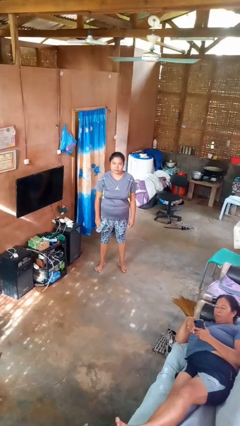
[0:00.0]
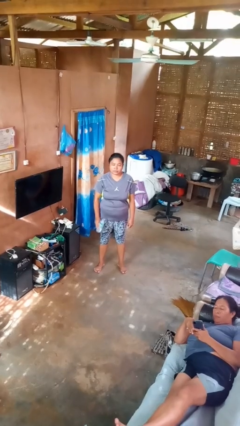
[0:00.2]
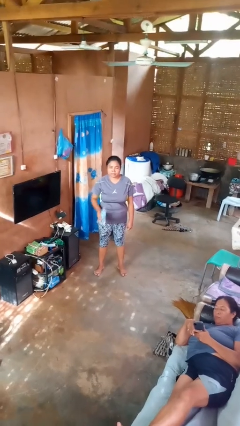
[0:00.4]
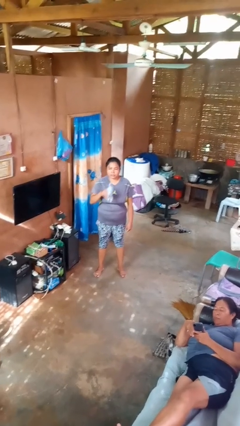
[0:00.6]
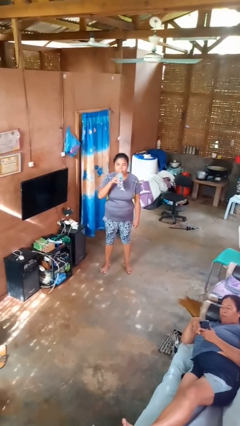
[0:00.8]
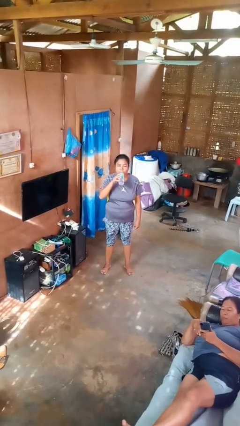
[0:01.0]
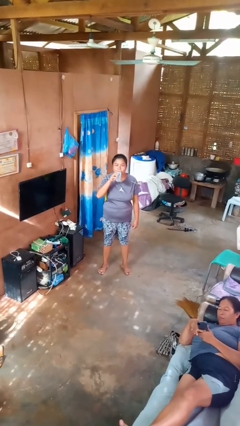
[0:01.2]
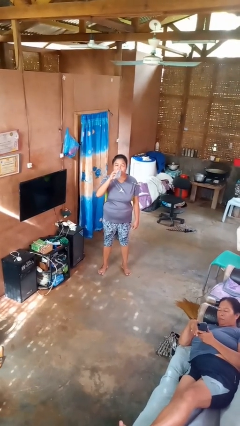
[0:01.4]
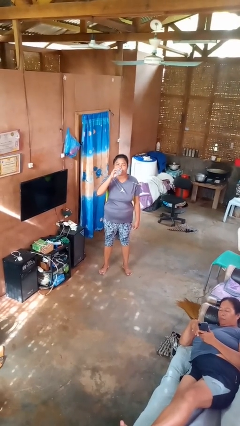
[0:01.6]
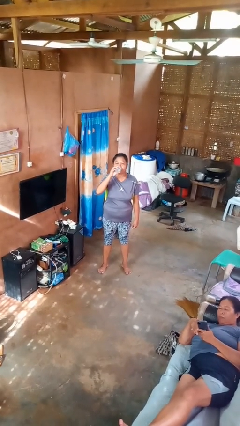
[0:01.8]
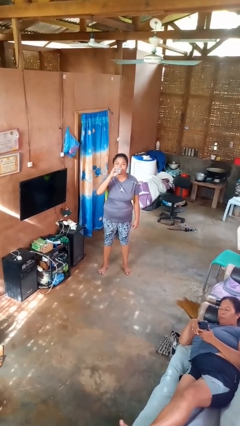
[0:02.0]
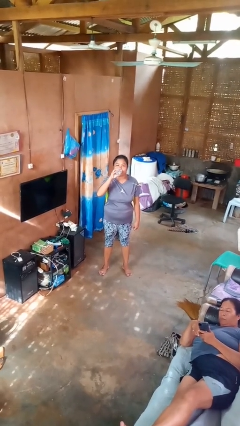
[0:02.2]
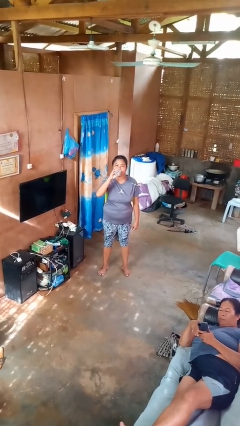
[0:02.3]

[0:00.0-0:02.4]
person drinks from bottle

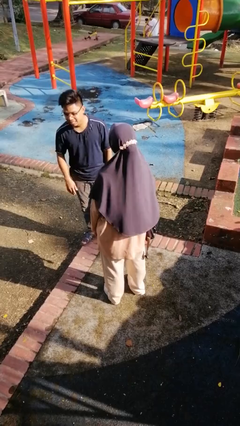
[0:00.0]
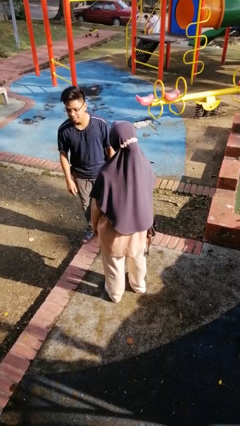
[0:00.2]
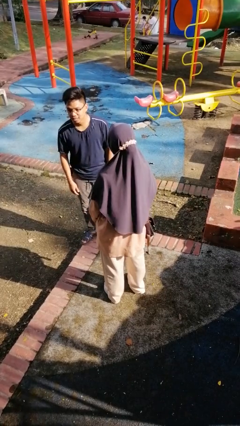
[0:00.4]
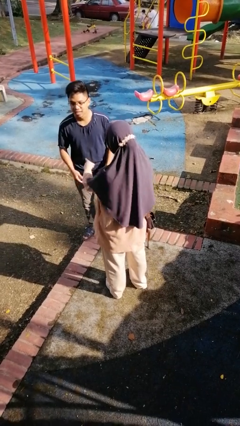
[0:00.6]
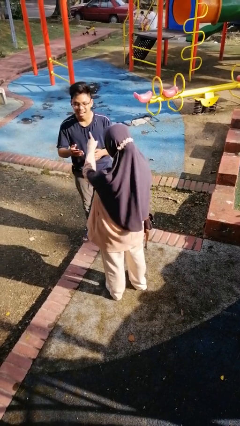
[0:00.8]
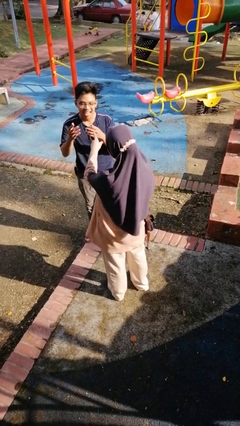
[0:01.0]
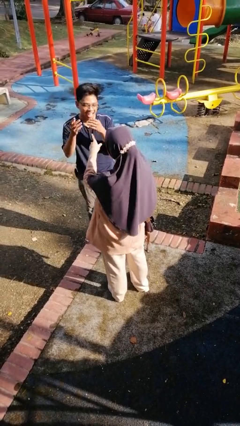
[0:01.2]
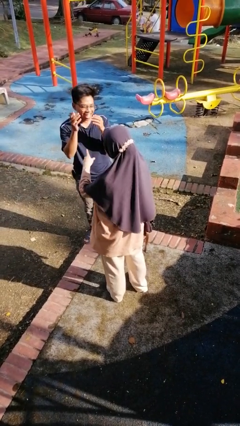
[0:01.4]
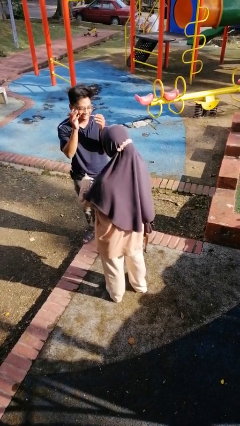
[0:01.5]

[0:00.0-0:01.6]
person laughs with person

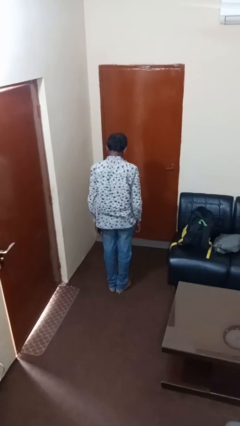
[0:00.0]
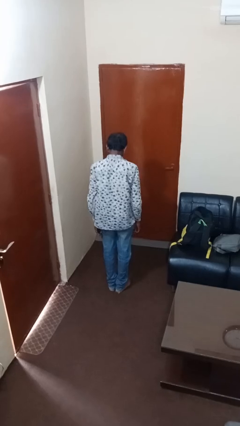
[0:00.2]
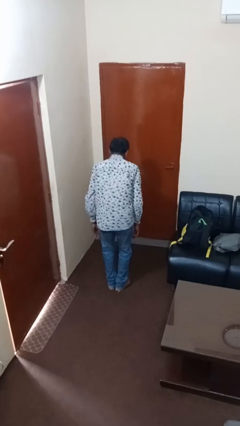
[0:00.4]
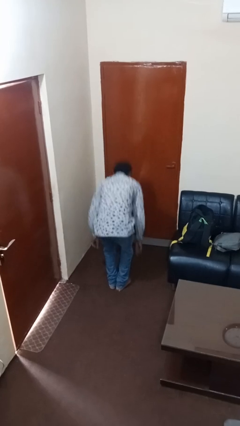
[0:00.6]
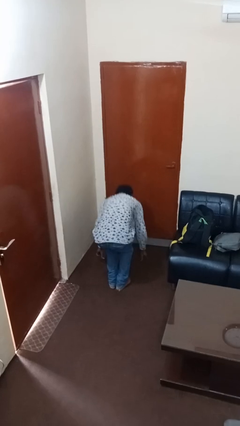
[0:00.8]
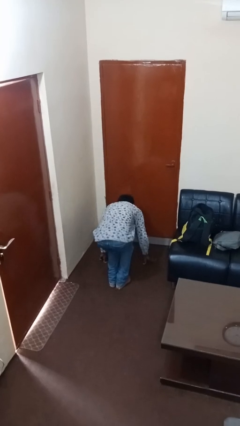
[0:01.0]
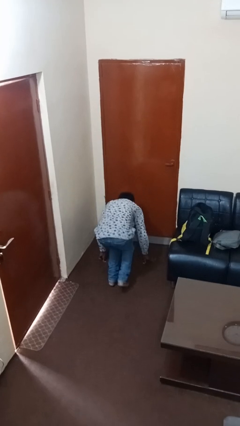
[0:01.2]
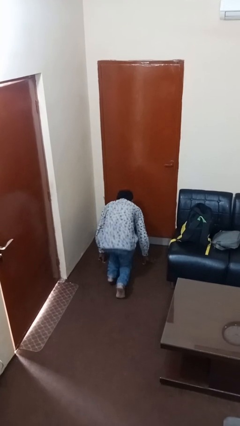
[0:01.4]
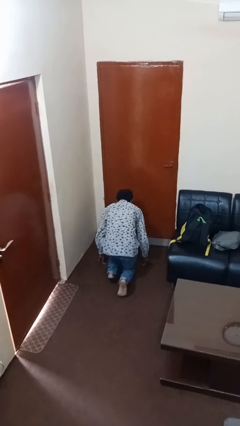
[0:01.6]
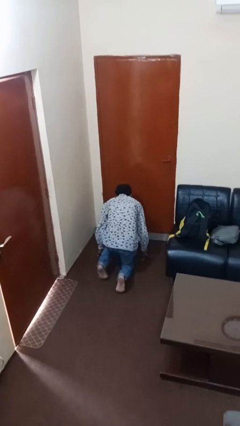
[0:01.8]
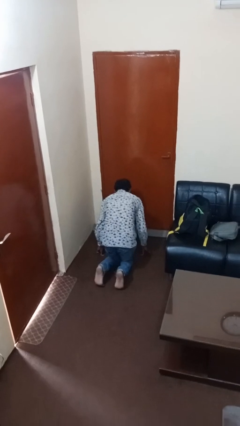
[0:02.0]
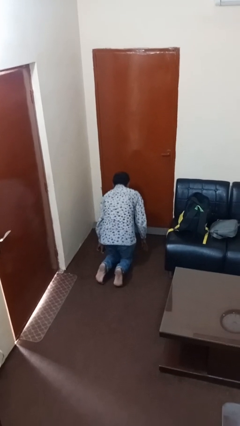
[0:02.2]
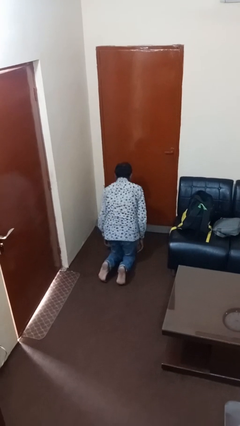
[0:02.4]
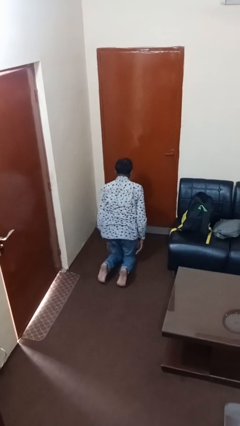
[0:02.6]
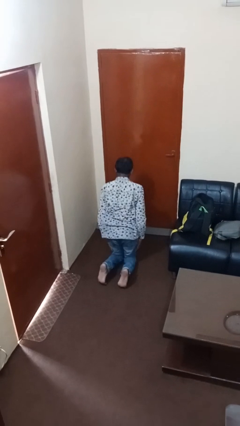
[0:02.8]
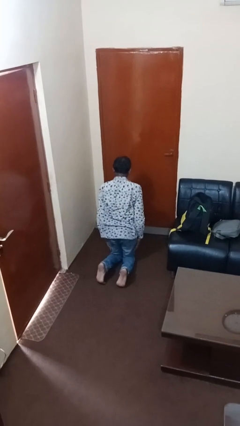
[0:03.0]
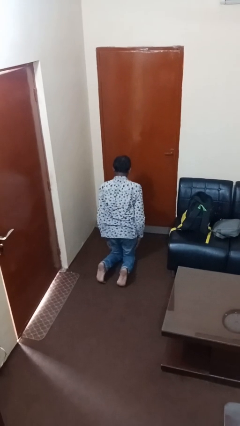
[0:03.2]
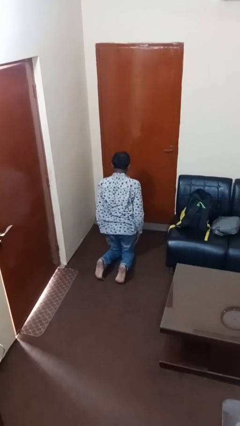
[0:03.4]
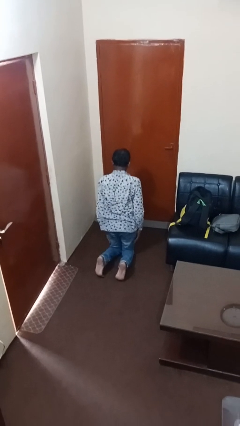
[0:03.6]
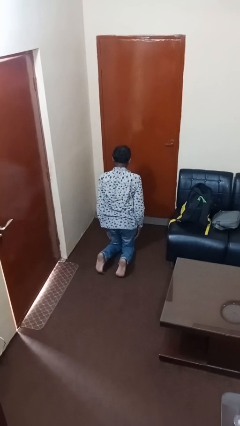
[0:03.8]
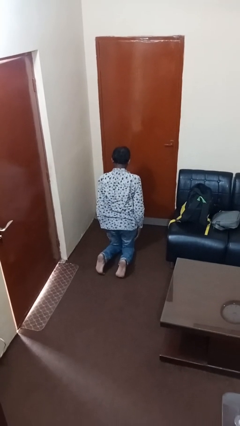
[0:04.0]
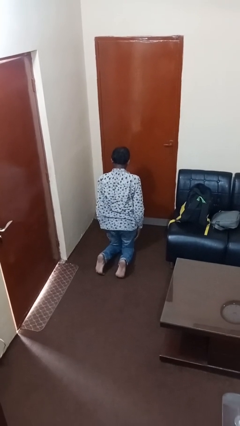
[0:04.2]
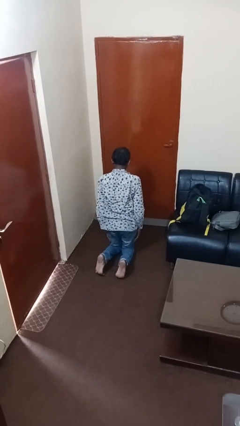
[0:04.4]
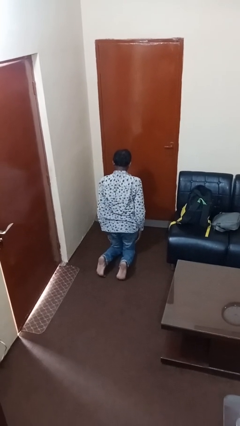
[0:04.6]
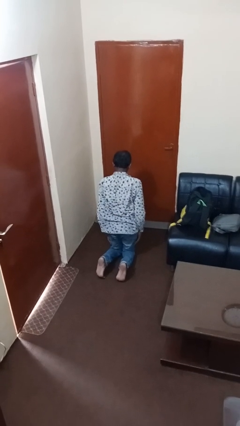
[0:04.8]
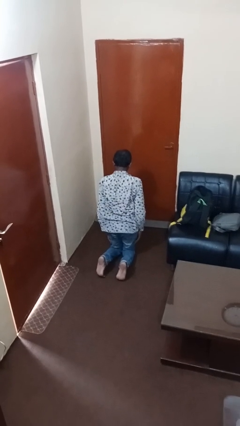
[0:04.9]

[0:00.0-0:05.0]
person kneels

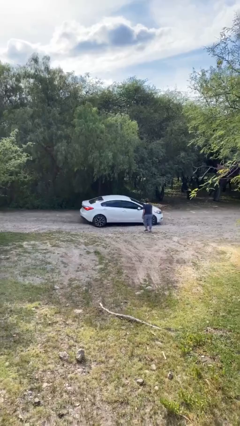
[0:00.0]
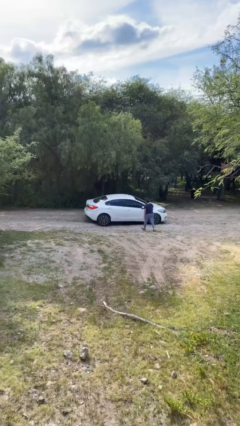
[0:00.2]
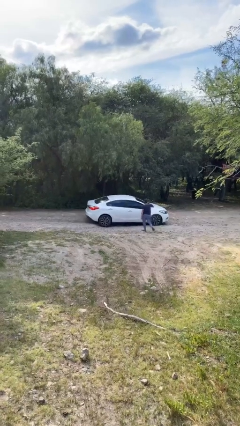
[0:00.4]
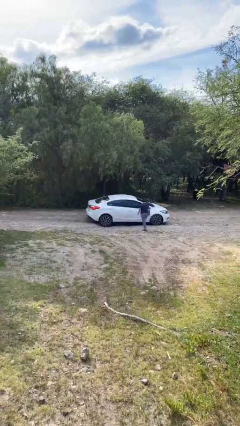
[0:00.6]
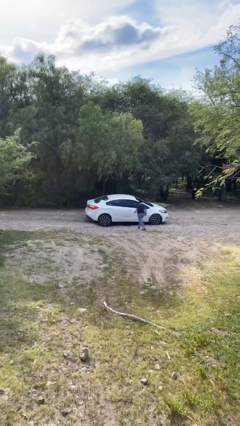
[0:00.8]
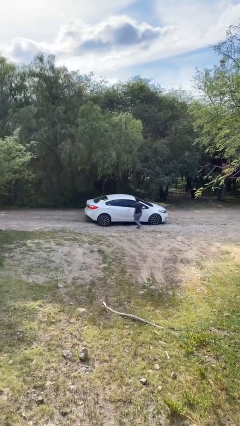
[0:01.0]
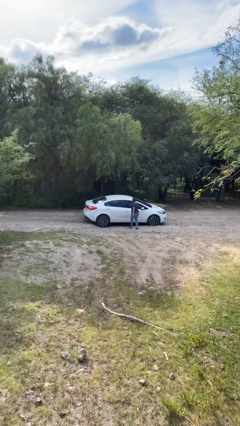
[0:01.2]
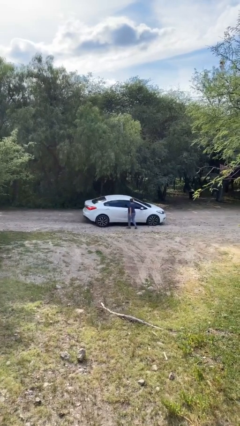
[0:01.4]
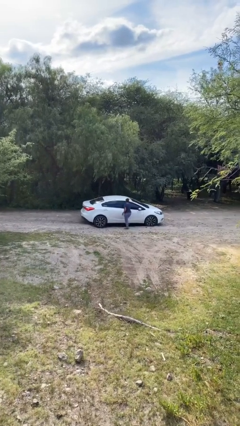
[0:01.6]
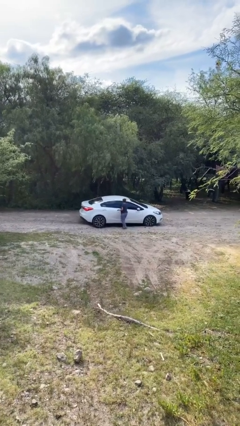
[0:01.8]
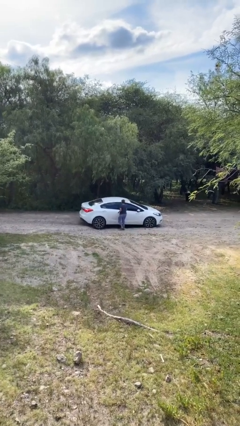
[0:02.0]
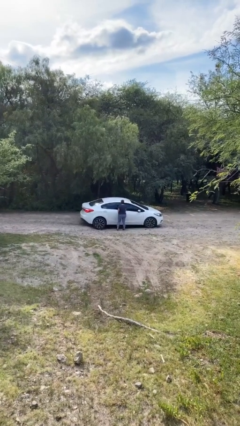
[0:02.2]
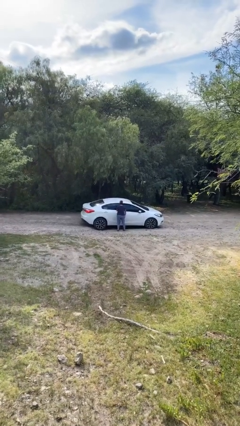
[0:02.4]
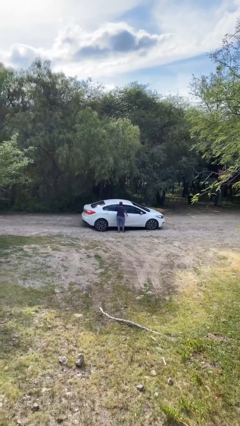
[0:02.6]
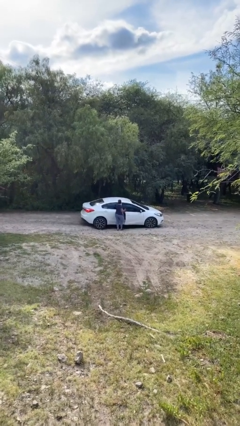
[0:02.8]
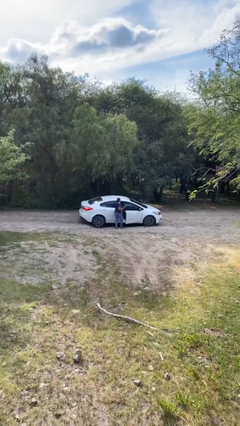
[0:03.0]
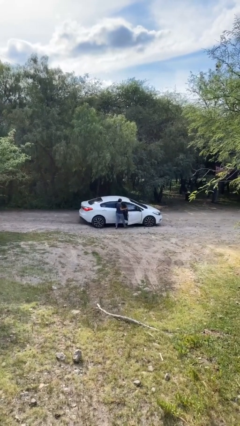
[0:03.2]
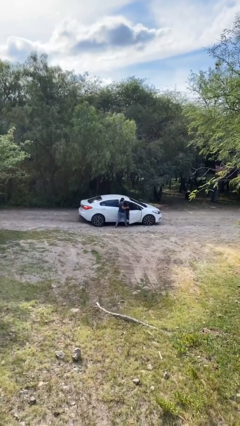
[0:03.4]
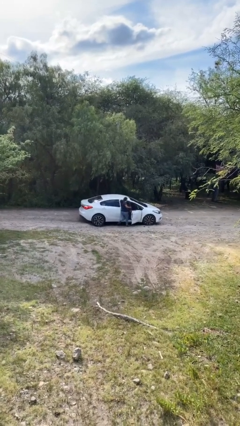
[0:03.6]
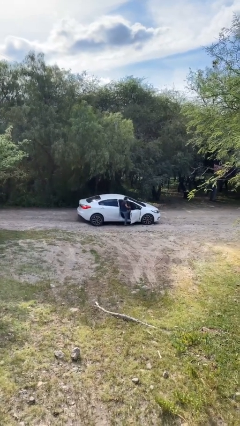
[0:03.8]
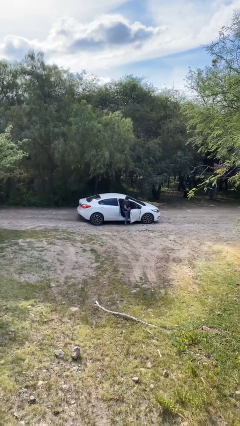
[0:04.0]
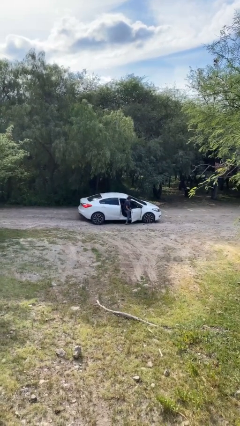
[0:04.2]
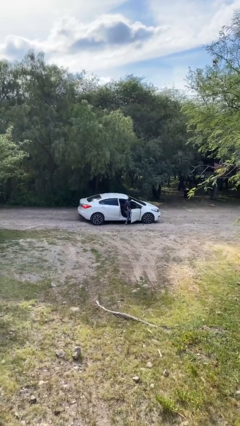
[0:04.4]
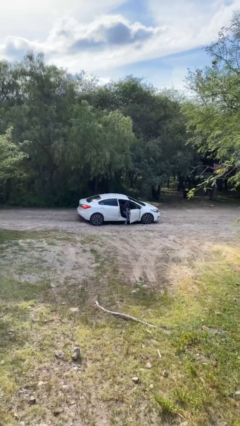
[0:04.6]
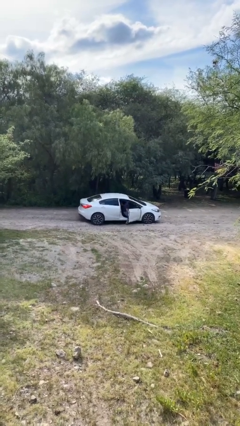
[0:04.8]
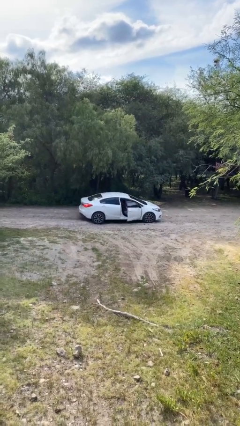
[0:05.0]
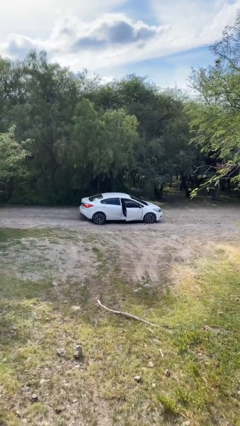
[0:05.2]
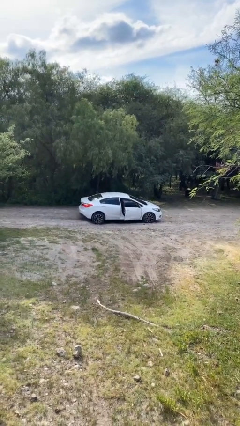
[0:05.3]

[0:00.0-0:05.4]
car picks up person

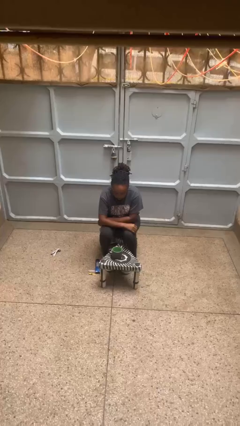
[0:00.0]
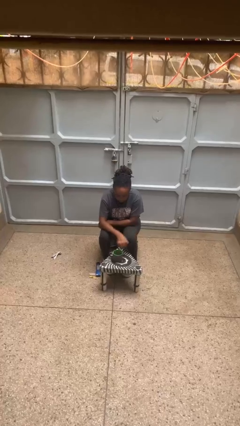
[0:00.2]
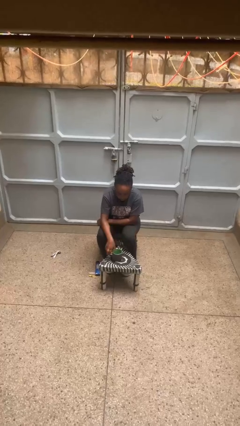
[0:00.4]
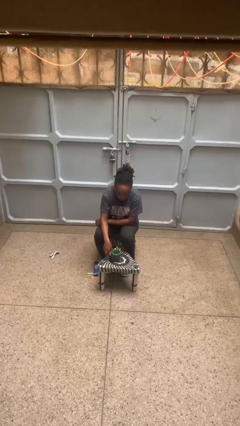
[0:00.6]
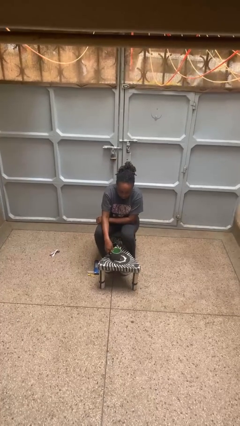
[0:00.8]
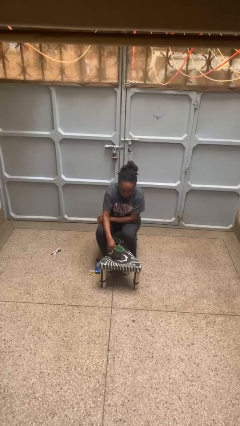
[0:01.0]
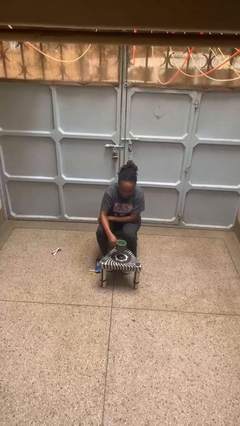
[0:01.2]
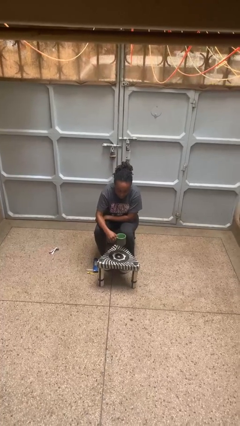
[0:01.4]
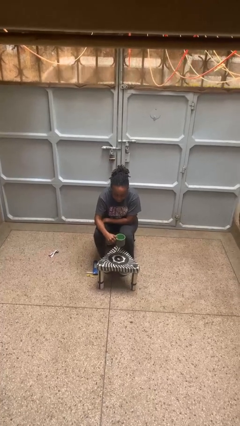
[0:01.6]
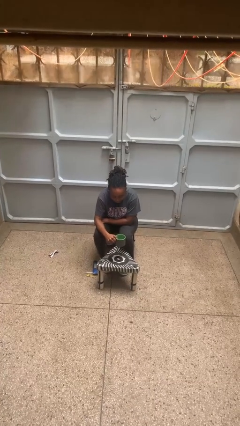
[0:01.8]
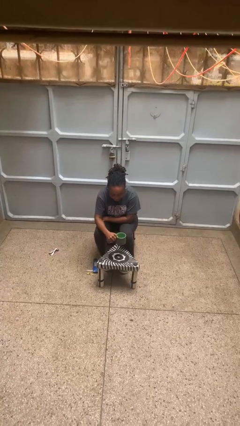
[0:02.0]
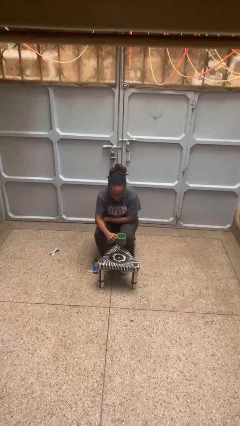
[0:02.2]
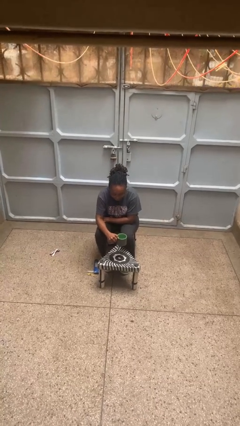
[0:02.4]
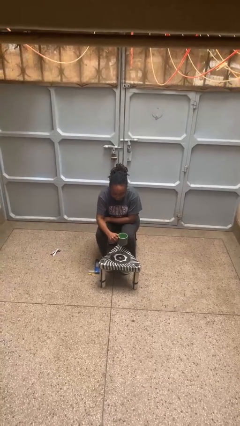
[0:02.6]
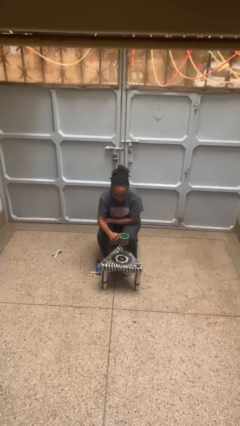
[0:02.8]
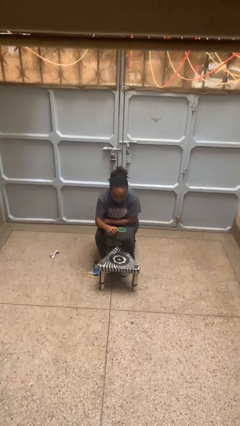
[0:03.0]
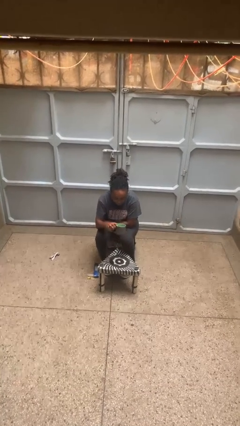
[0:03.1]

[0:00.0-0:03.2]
person picks up object from table
